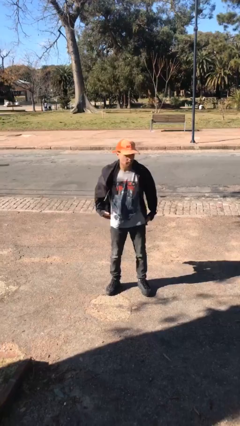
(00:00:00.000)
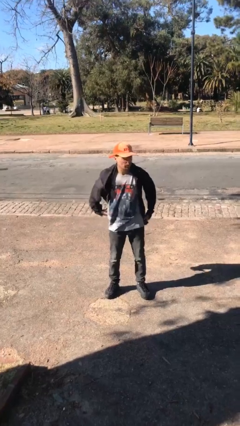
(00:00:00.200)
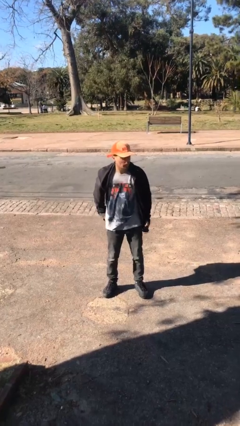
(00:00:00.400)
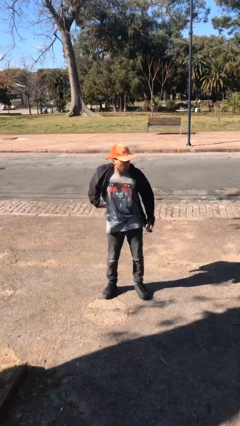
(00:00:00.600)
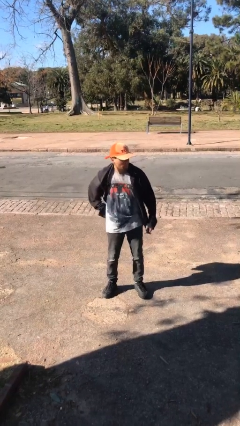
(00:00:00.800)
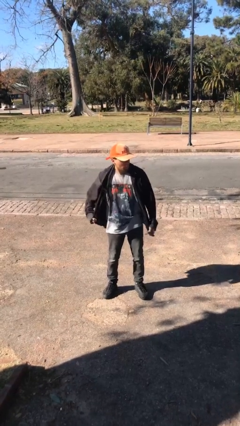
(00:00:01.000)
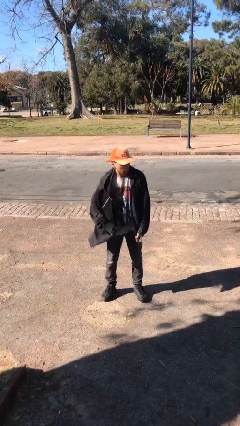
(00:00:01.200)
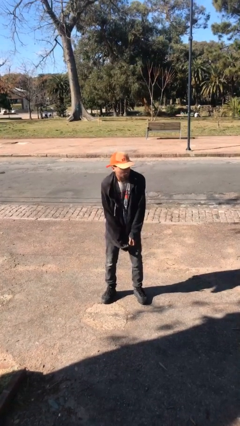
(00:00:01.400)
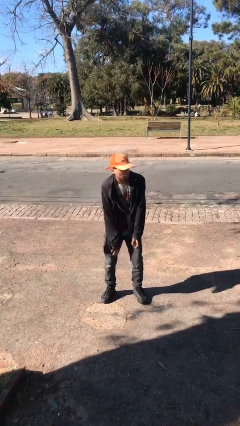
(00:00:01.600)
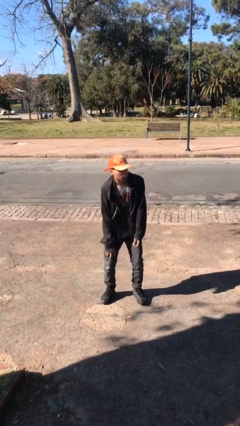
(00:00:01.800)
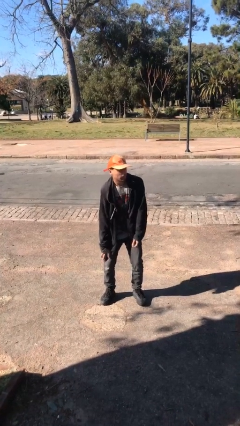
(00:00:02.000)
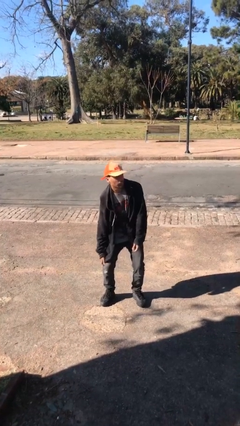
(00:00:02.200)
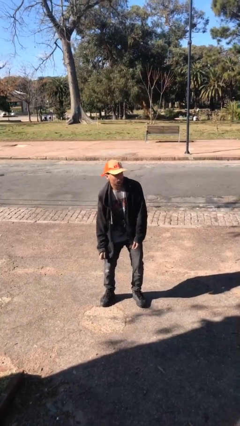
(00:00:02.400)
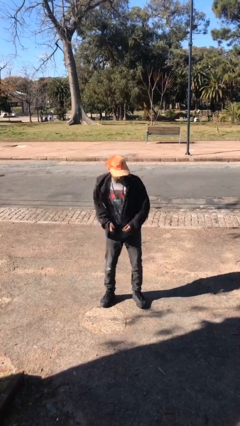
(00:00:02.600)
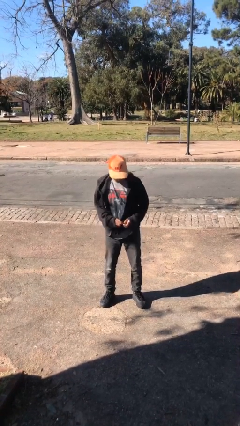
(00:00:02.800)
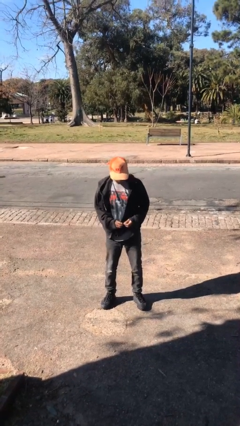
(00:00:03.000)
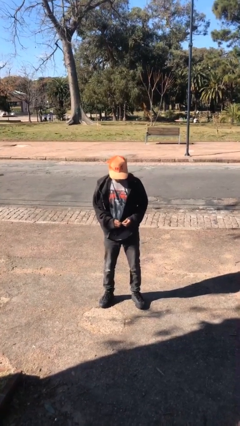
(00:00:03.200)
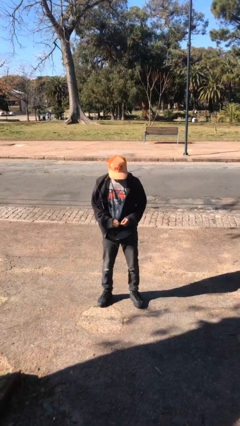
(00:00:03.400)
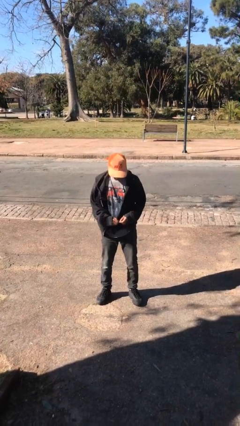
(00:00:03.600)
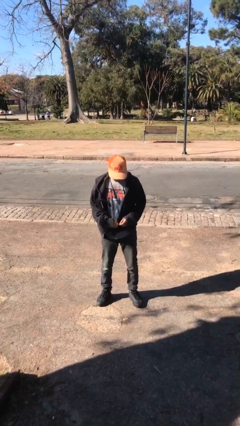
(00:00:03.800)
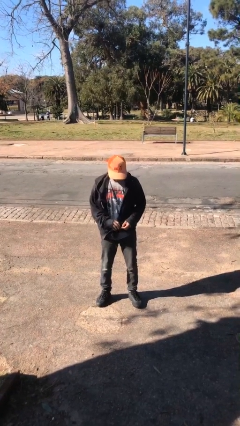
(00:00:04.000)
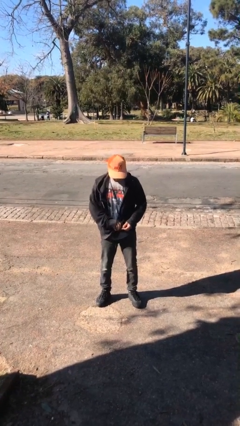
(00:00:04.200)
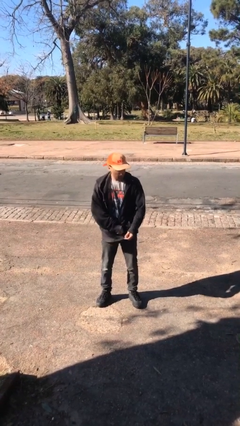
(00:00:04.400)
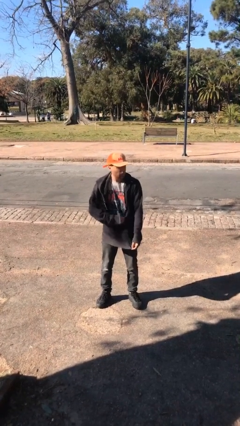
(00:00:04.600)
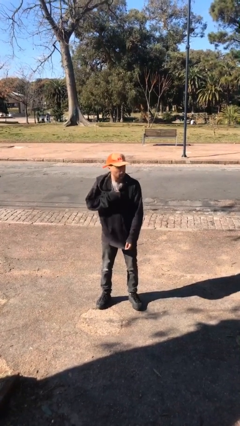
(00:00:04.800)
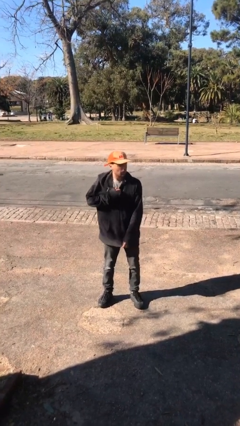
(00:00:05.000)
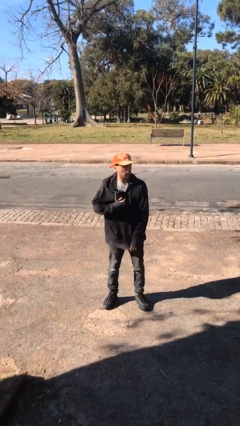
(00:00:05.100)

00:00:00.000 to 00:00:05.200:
person zips up jacket

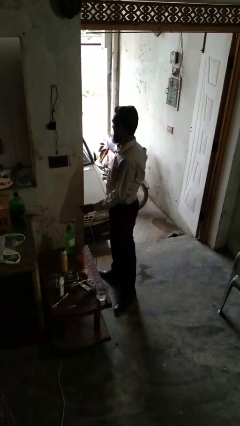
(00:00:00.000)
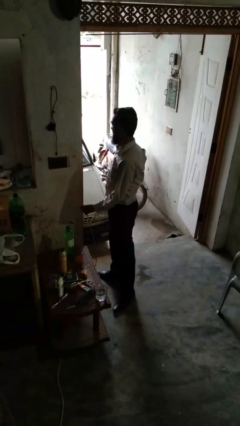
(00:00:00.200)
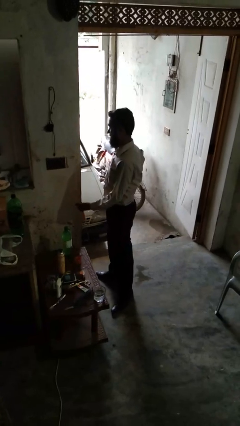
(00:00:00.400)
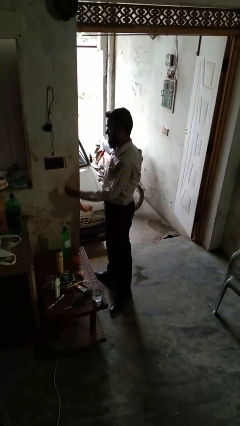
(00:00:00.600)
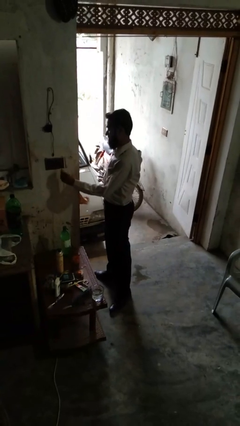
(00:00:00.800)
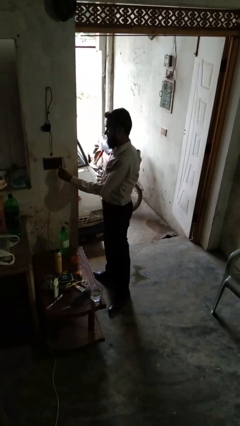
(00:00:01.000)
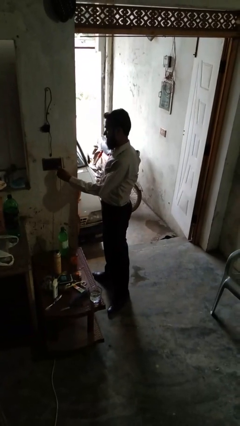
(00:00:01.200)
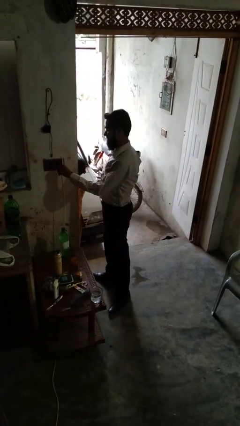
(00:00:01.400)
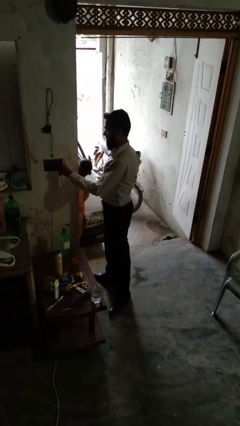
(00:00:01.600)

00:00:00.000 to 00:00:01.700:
person plugs into electrical socket

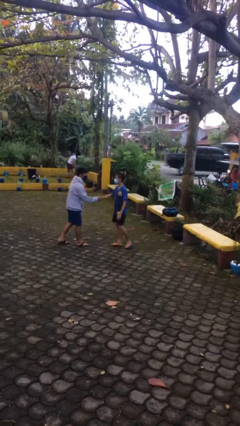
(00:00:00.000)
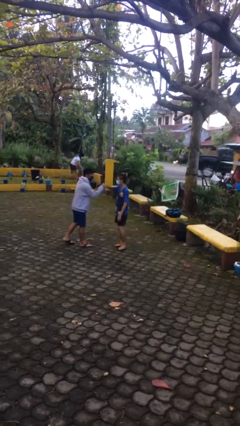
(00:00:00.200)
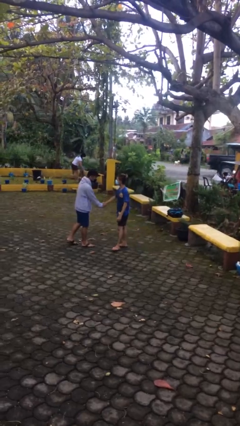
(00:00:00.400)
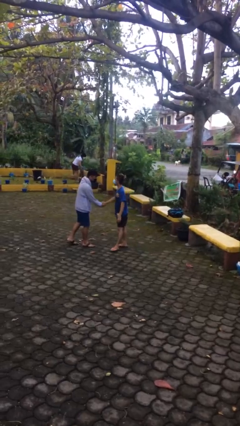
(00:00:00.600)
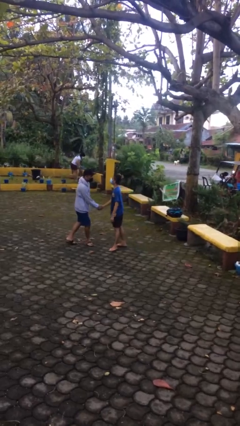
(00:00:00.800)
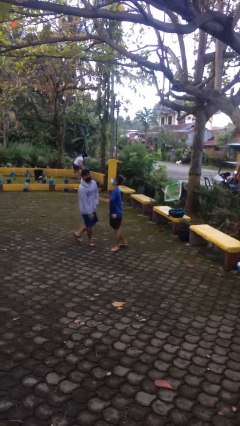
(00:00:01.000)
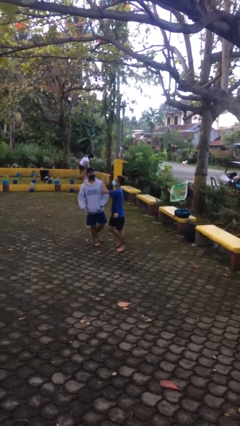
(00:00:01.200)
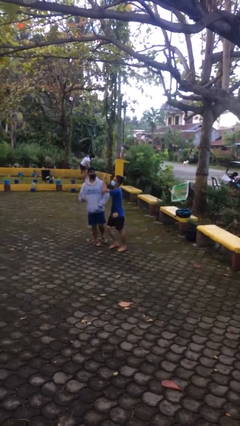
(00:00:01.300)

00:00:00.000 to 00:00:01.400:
person shakes hand

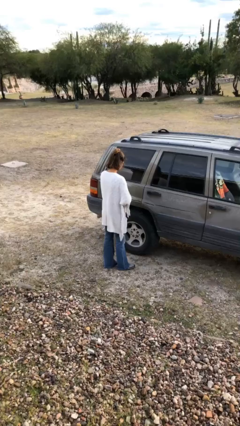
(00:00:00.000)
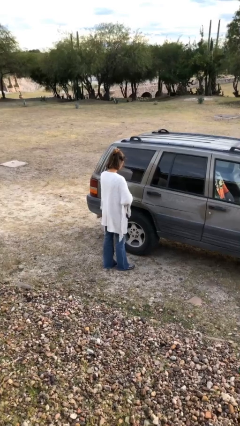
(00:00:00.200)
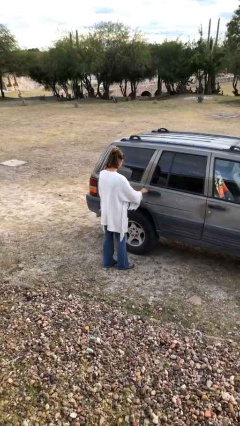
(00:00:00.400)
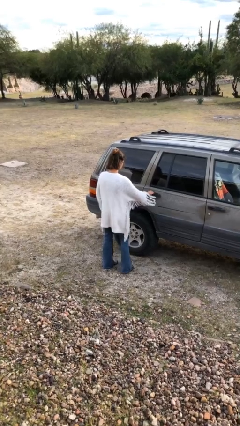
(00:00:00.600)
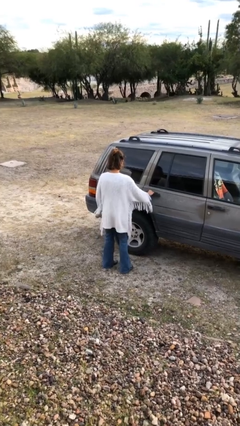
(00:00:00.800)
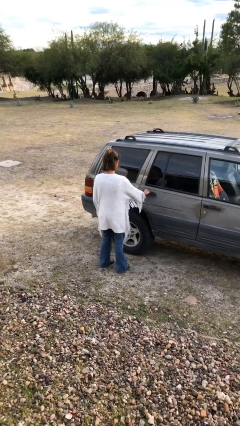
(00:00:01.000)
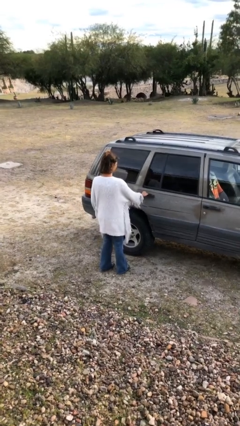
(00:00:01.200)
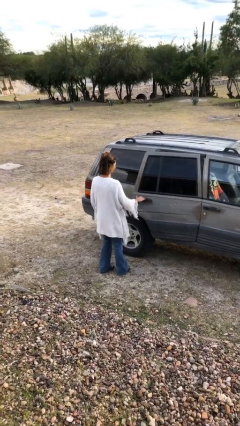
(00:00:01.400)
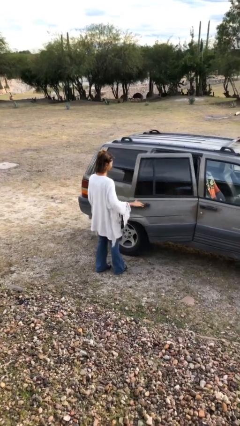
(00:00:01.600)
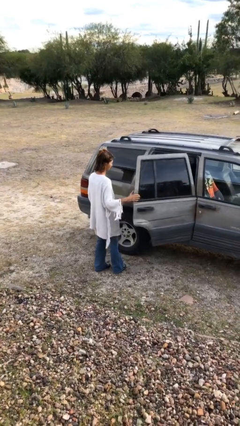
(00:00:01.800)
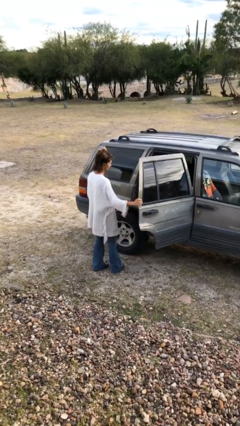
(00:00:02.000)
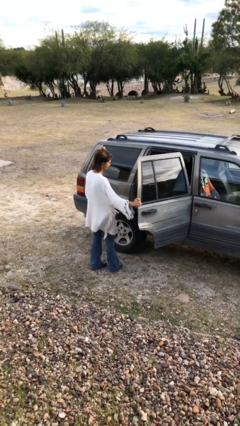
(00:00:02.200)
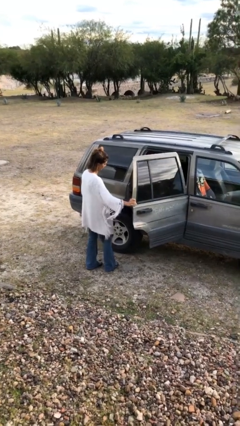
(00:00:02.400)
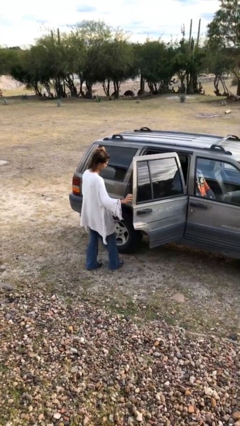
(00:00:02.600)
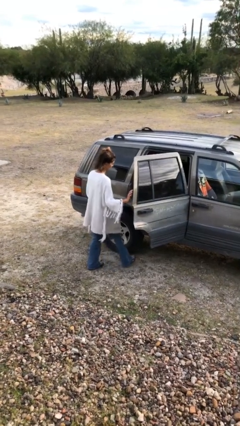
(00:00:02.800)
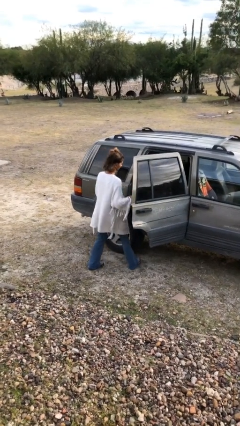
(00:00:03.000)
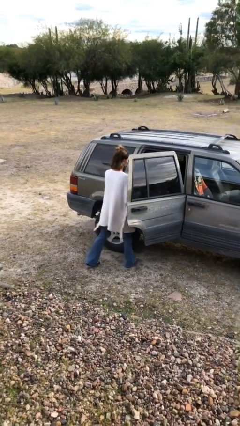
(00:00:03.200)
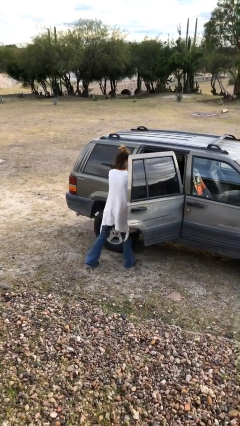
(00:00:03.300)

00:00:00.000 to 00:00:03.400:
person opens car door

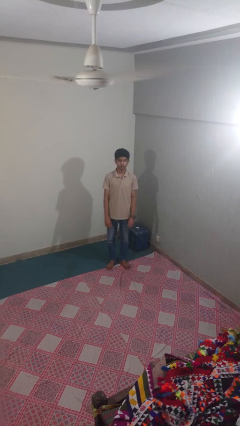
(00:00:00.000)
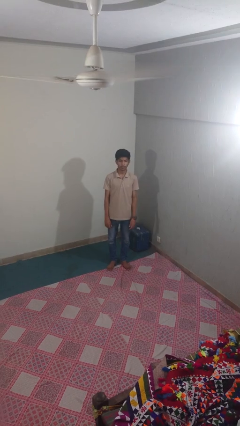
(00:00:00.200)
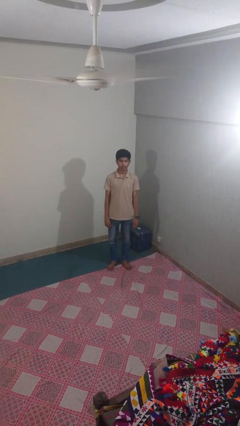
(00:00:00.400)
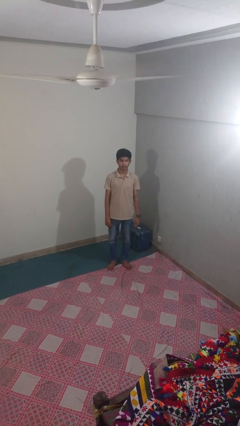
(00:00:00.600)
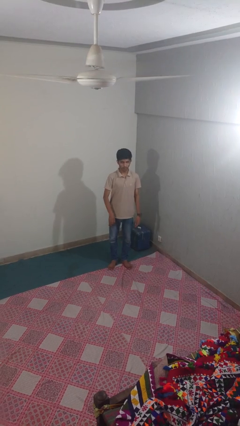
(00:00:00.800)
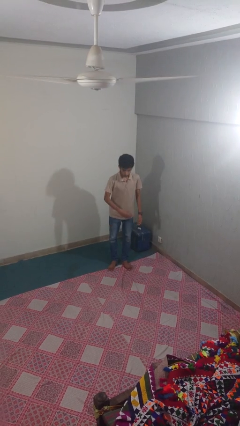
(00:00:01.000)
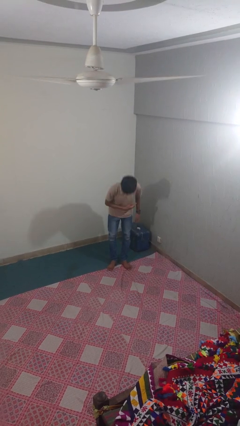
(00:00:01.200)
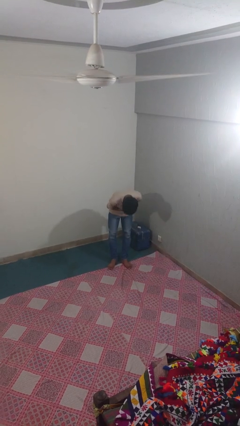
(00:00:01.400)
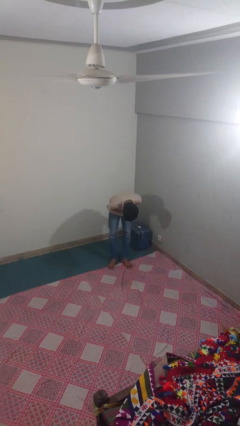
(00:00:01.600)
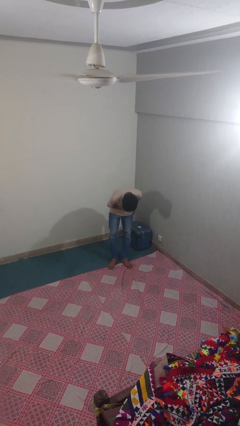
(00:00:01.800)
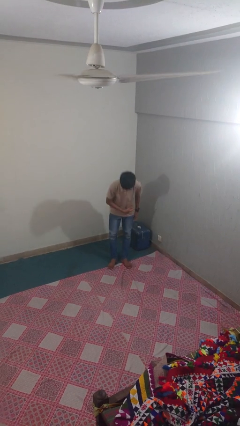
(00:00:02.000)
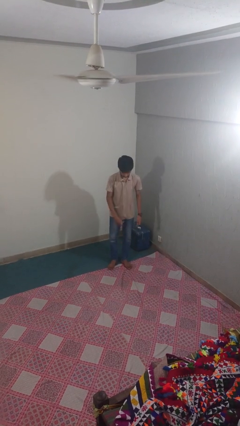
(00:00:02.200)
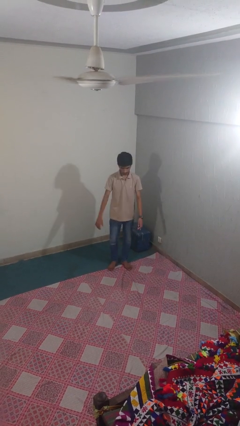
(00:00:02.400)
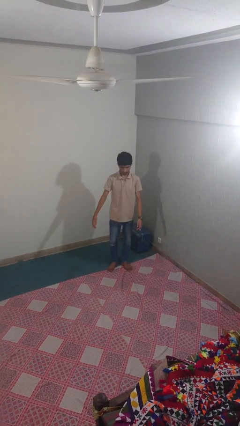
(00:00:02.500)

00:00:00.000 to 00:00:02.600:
person bows

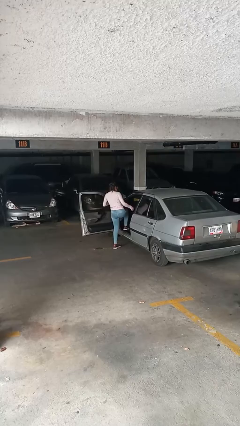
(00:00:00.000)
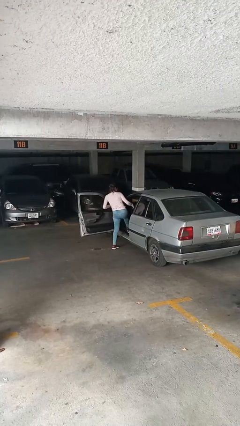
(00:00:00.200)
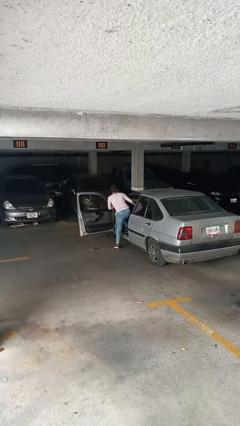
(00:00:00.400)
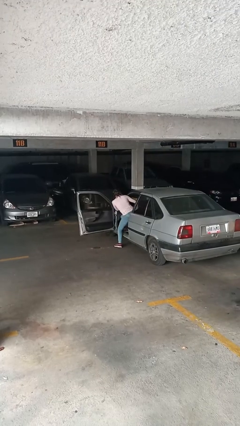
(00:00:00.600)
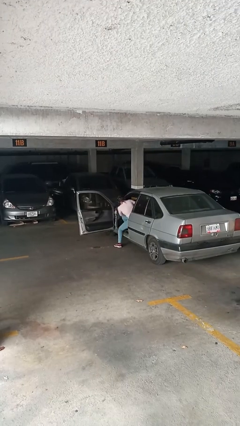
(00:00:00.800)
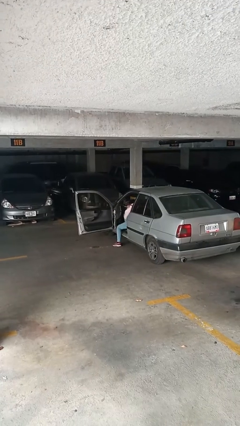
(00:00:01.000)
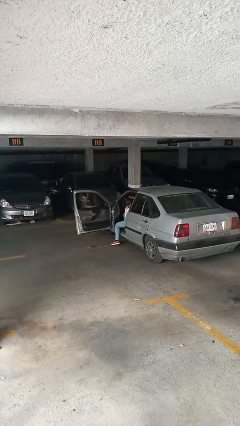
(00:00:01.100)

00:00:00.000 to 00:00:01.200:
person enters car

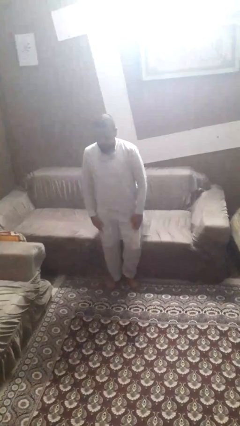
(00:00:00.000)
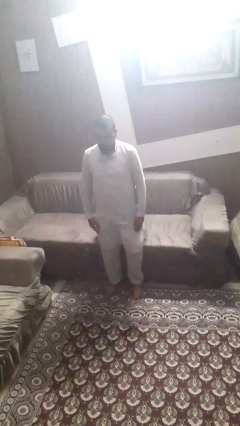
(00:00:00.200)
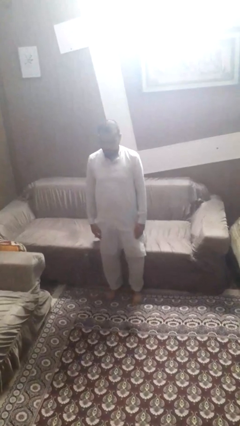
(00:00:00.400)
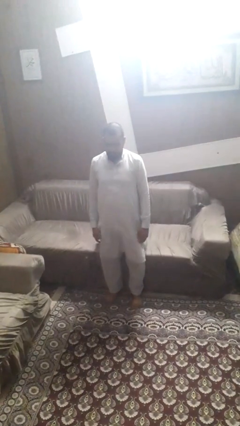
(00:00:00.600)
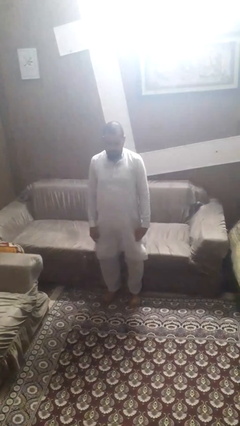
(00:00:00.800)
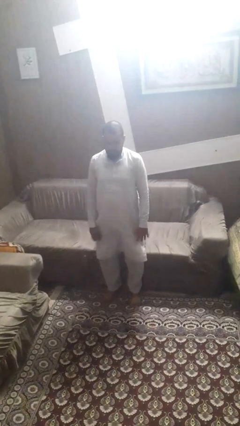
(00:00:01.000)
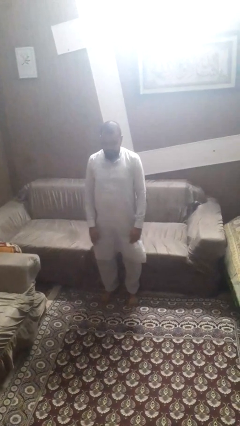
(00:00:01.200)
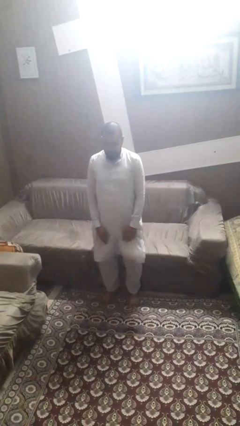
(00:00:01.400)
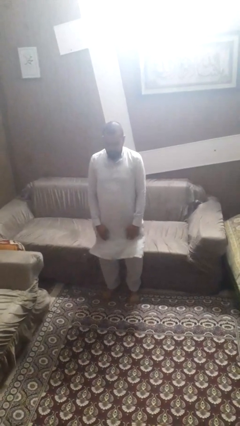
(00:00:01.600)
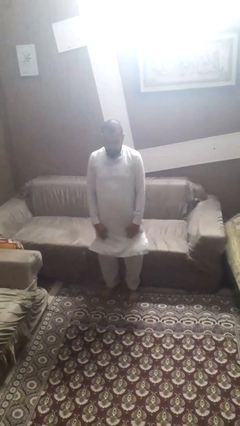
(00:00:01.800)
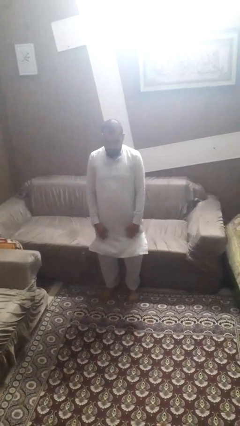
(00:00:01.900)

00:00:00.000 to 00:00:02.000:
person stands up
